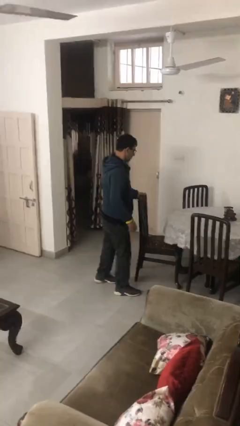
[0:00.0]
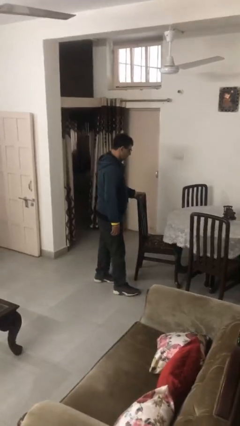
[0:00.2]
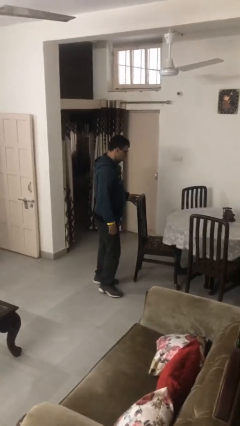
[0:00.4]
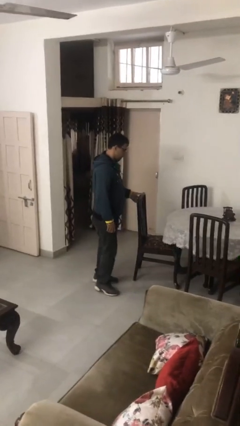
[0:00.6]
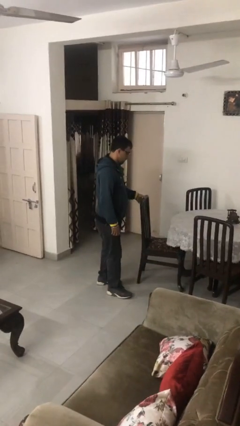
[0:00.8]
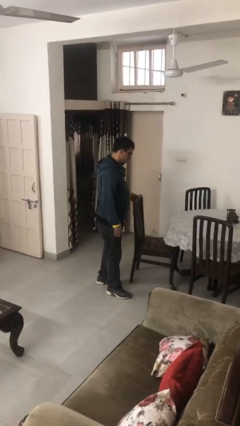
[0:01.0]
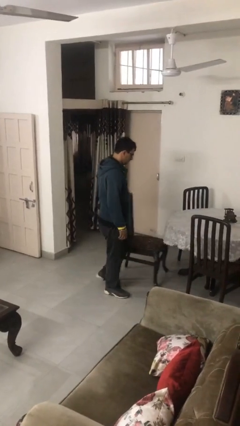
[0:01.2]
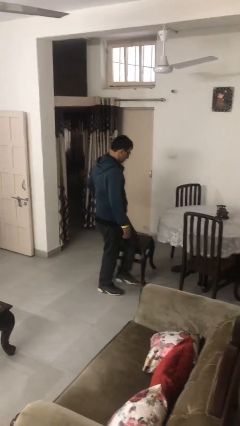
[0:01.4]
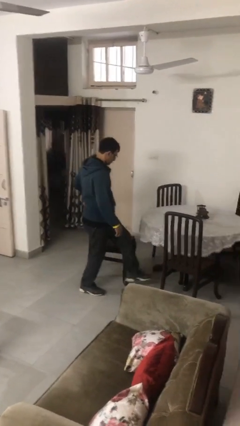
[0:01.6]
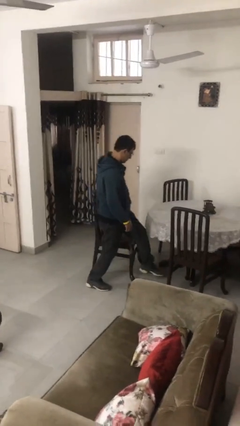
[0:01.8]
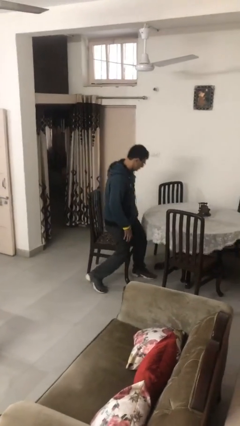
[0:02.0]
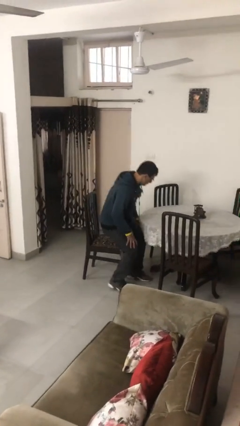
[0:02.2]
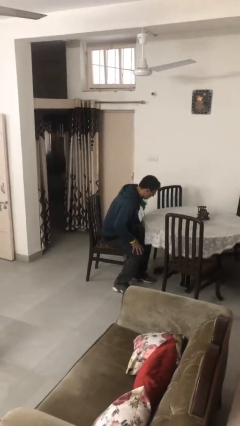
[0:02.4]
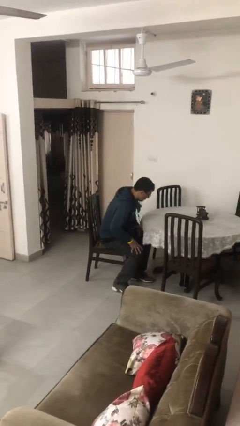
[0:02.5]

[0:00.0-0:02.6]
person sits down

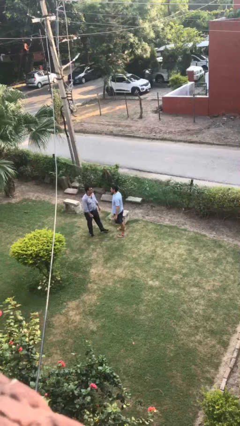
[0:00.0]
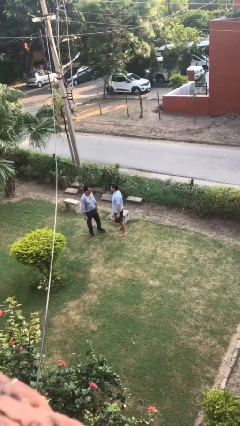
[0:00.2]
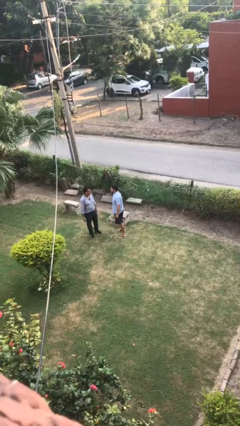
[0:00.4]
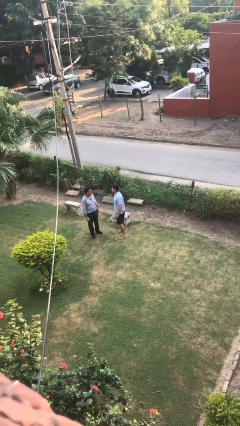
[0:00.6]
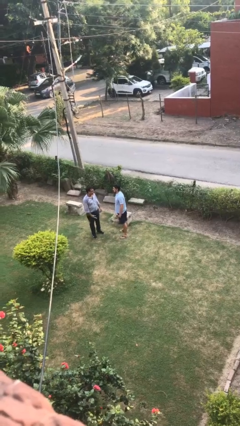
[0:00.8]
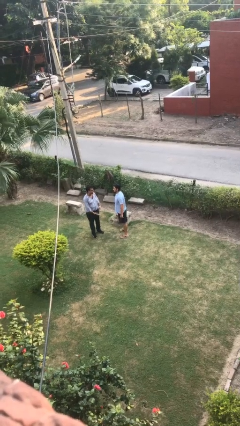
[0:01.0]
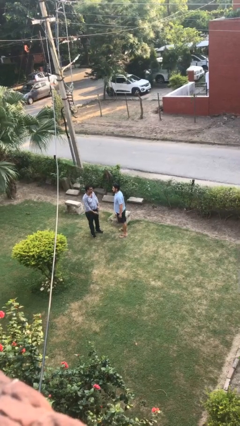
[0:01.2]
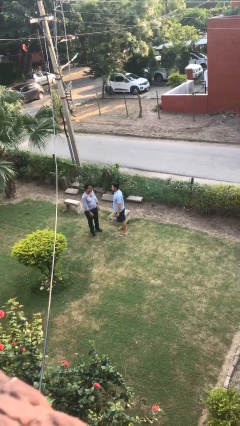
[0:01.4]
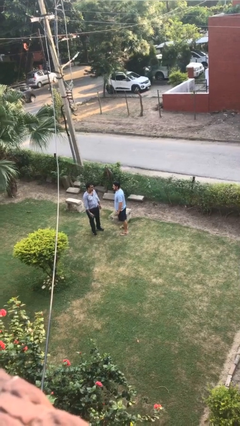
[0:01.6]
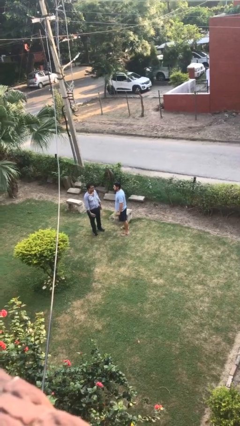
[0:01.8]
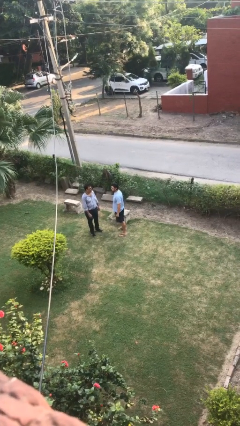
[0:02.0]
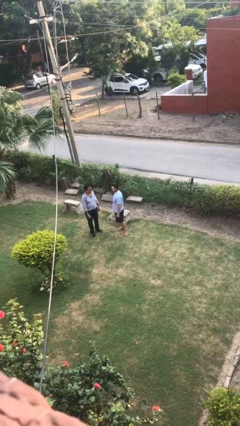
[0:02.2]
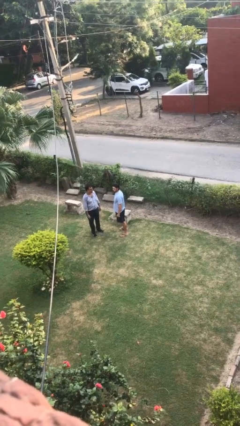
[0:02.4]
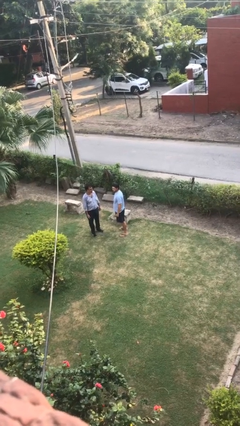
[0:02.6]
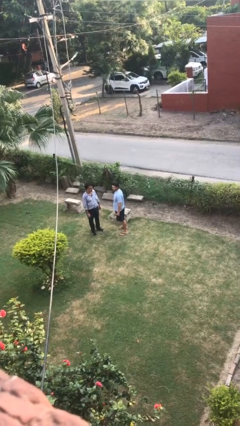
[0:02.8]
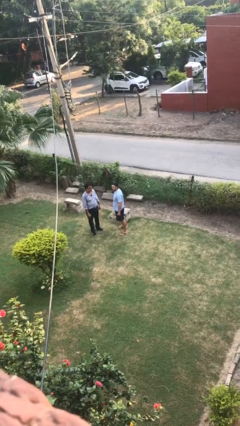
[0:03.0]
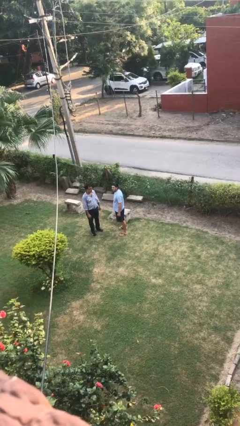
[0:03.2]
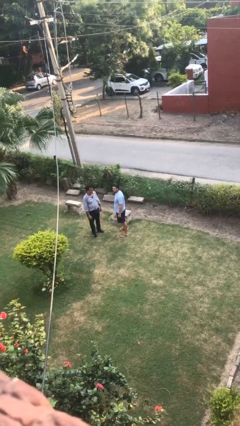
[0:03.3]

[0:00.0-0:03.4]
person talks to person

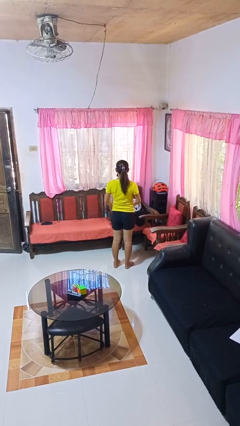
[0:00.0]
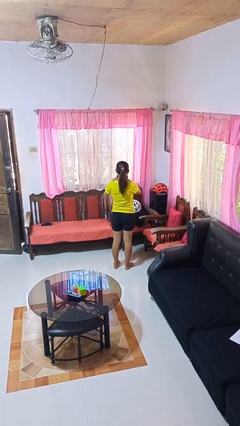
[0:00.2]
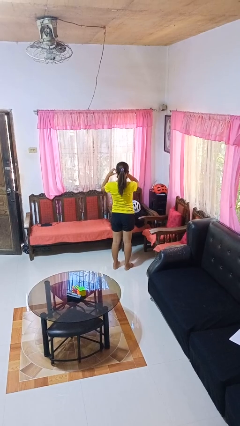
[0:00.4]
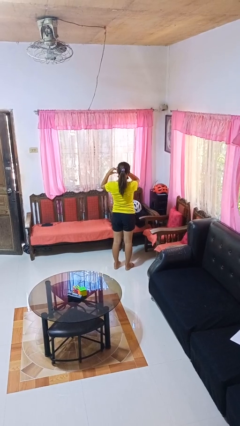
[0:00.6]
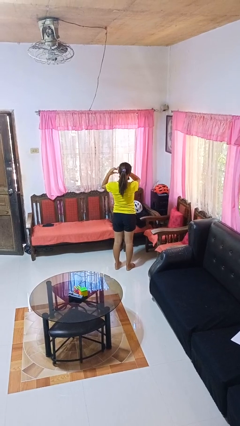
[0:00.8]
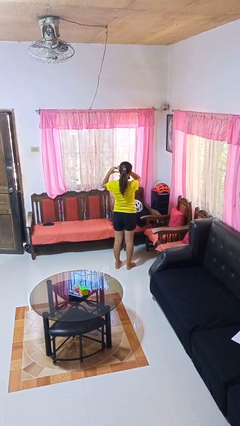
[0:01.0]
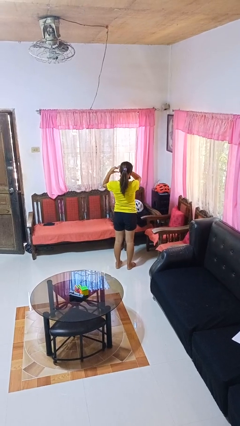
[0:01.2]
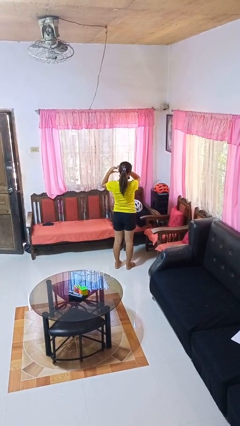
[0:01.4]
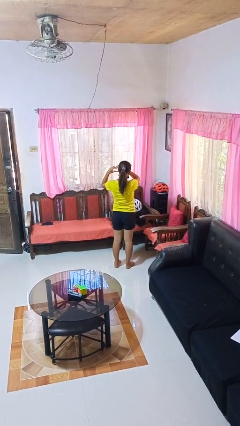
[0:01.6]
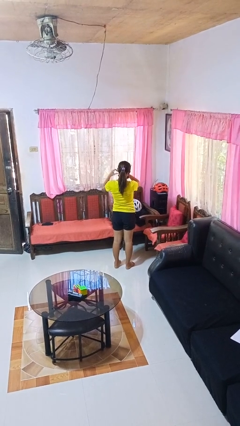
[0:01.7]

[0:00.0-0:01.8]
person gestures heart

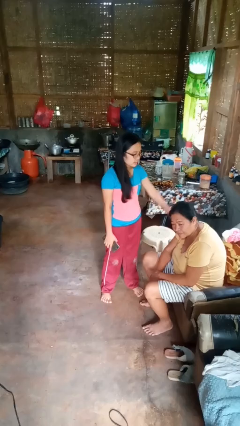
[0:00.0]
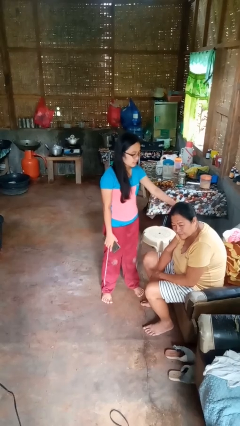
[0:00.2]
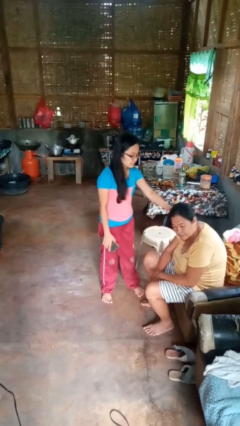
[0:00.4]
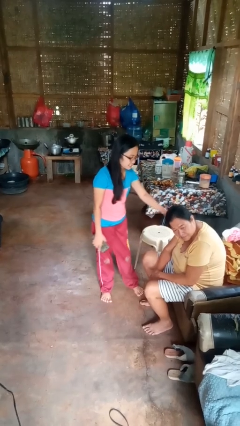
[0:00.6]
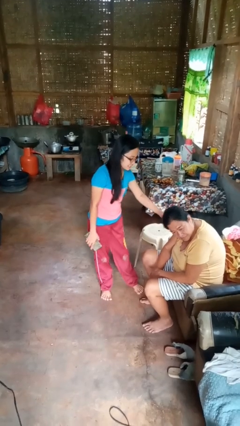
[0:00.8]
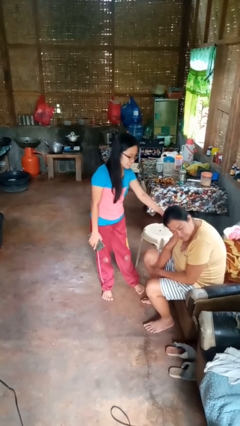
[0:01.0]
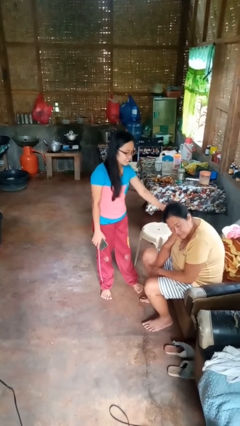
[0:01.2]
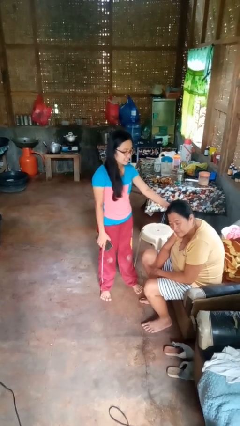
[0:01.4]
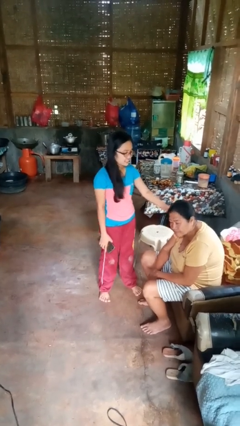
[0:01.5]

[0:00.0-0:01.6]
person grabs person by hair

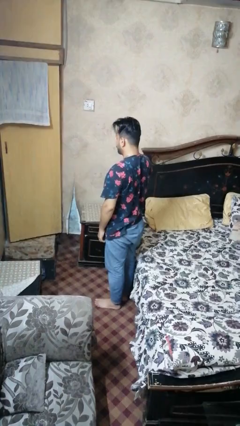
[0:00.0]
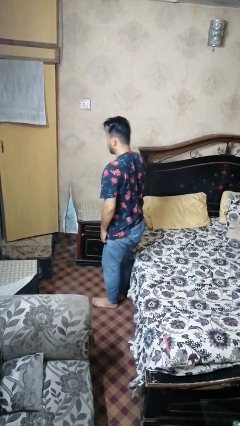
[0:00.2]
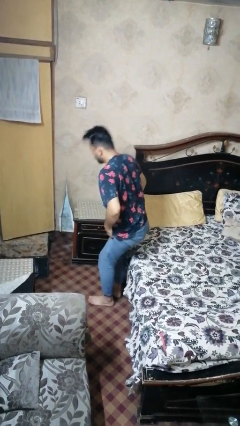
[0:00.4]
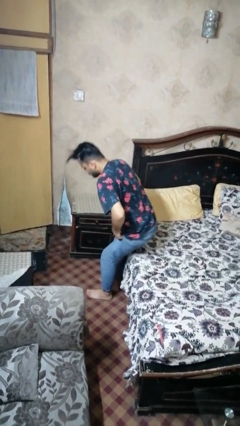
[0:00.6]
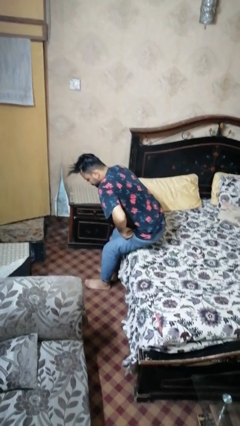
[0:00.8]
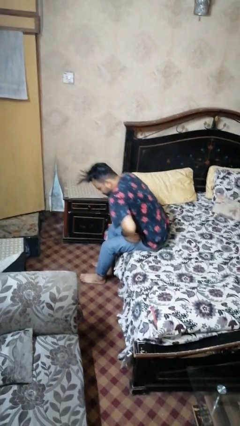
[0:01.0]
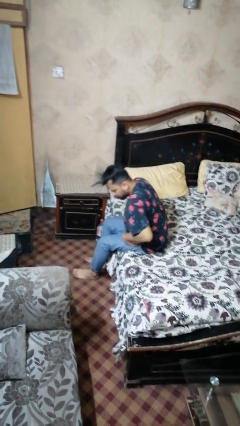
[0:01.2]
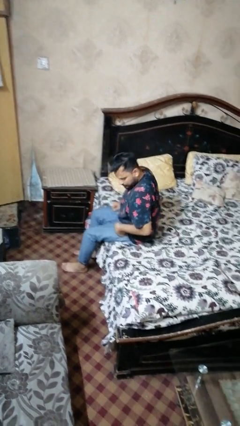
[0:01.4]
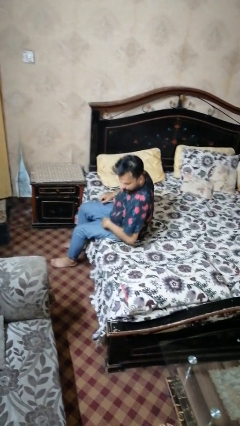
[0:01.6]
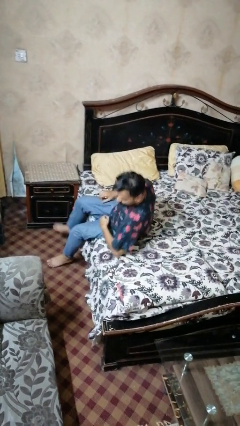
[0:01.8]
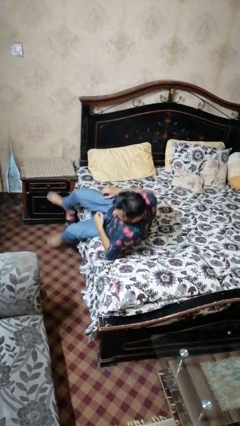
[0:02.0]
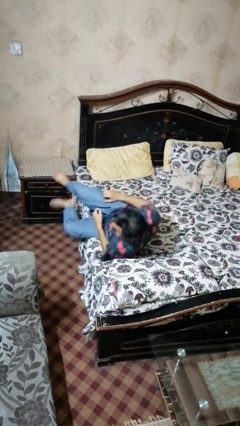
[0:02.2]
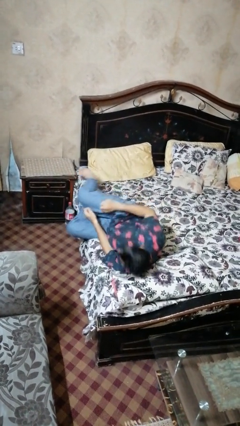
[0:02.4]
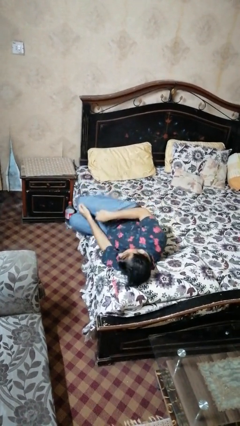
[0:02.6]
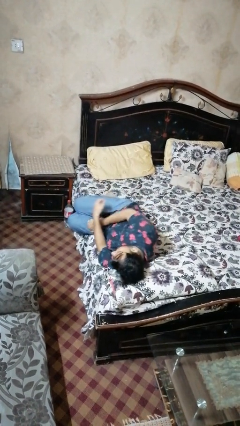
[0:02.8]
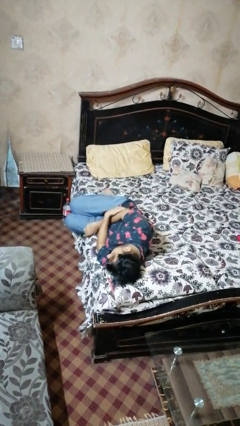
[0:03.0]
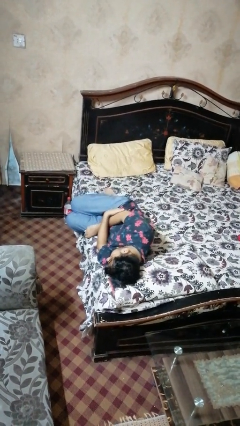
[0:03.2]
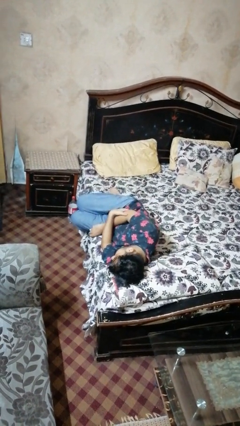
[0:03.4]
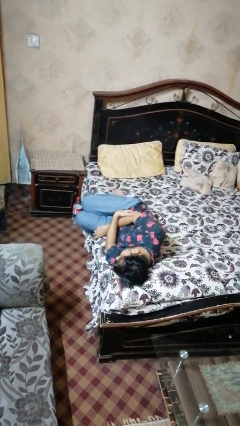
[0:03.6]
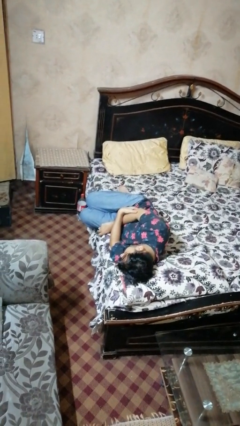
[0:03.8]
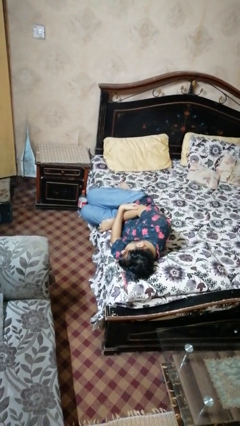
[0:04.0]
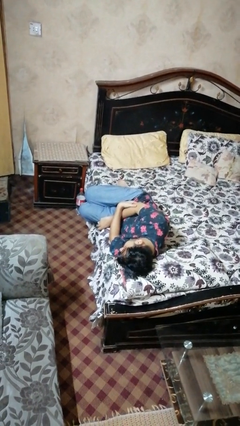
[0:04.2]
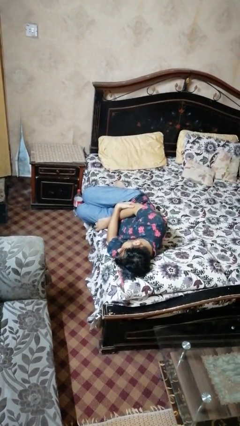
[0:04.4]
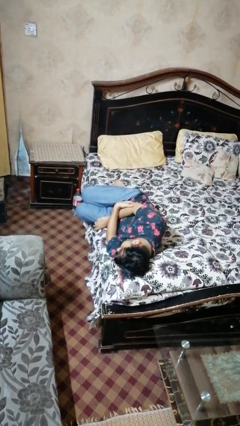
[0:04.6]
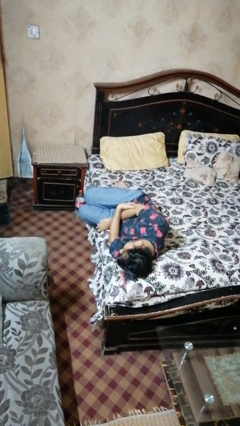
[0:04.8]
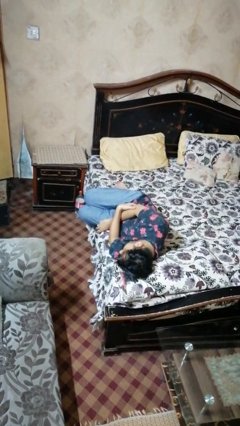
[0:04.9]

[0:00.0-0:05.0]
person lies down on bed

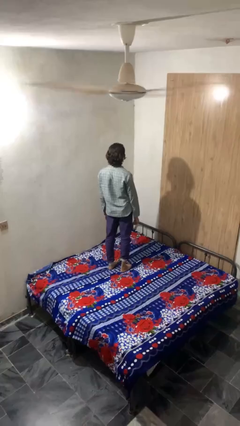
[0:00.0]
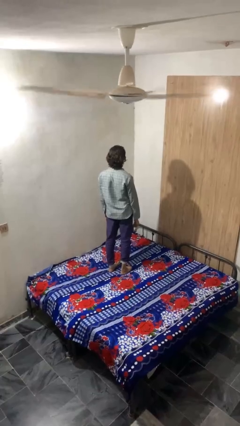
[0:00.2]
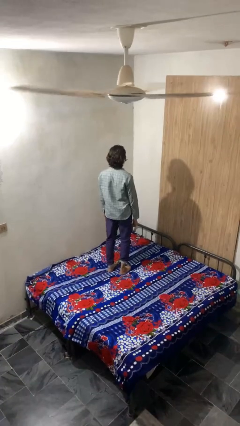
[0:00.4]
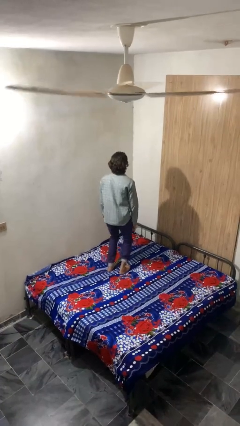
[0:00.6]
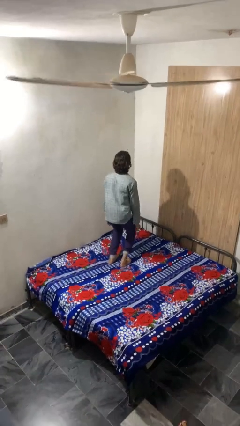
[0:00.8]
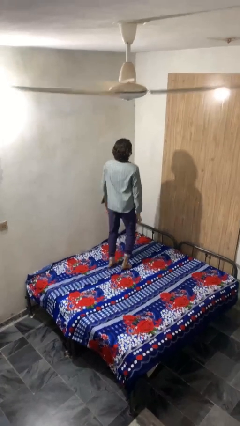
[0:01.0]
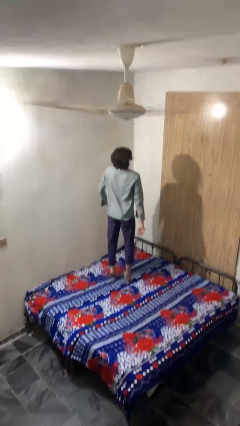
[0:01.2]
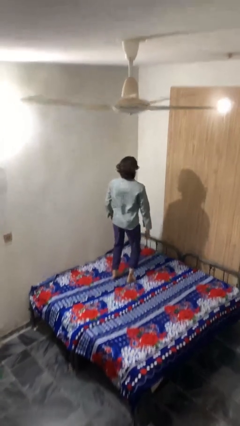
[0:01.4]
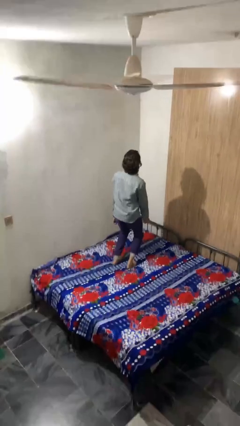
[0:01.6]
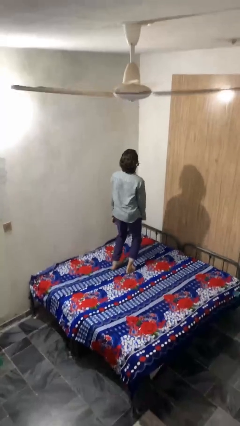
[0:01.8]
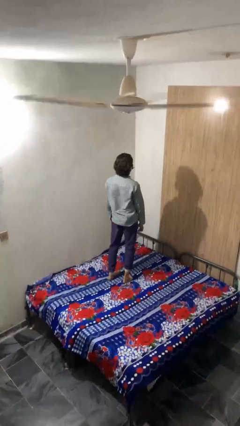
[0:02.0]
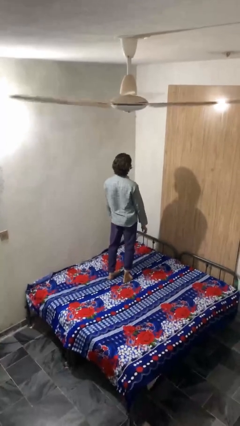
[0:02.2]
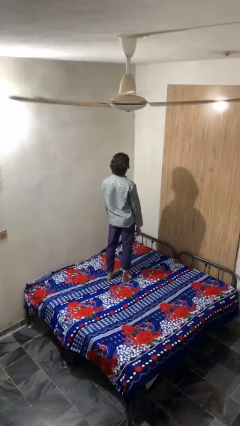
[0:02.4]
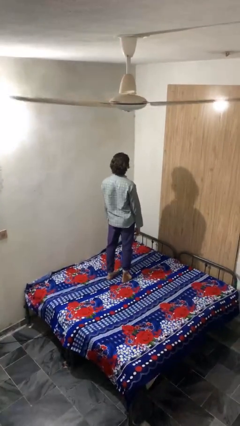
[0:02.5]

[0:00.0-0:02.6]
person jumps on bed

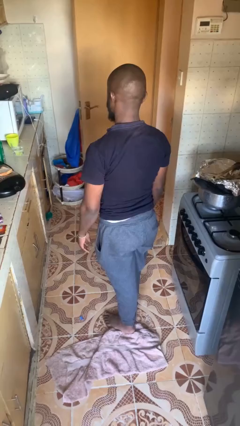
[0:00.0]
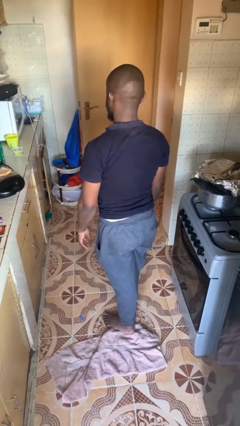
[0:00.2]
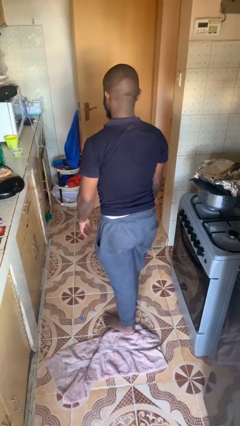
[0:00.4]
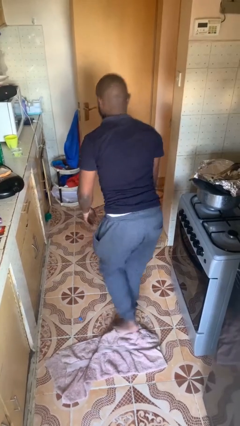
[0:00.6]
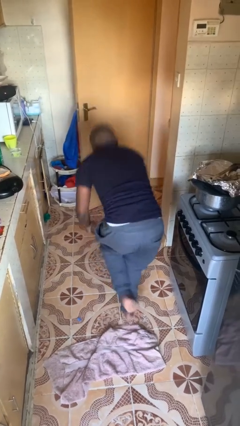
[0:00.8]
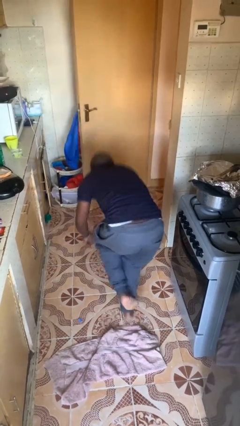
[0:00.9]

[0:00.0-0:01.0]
person trips on object on floor
